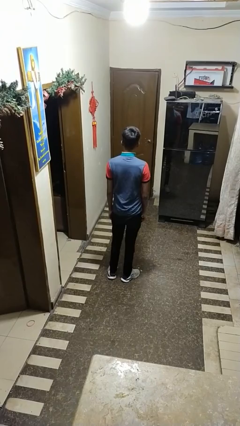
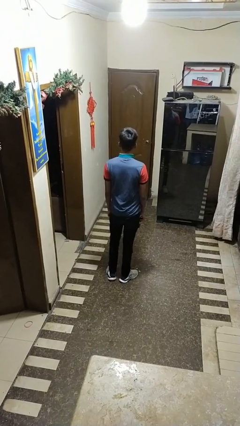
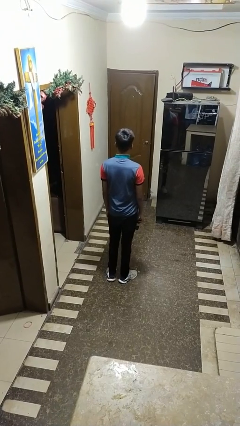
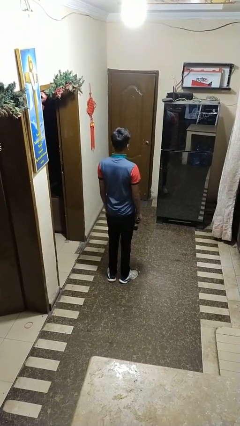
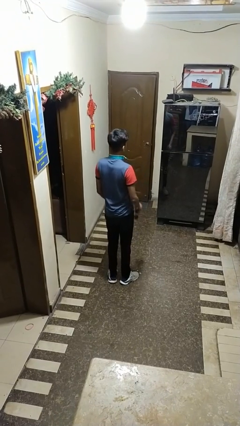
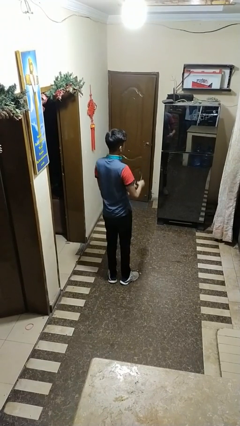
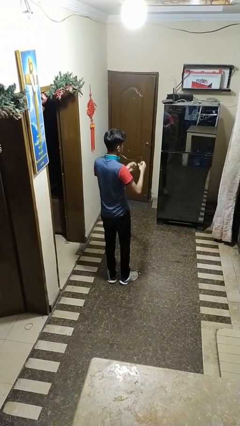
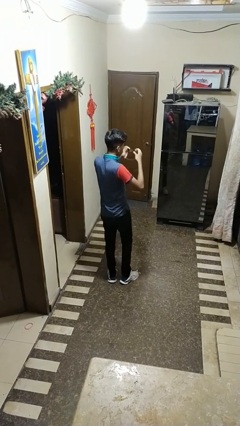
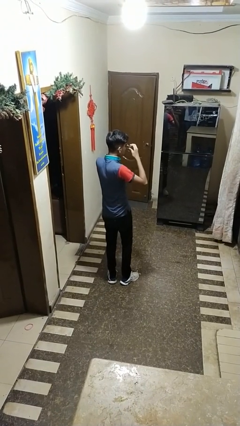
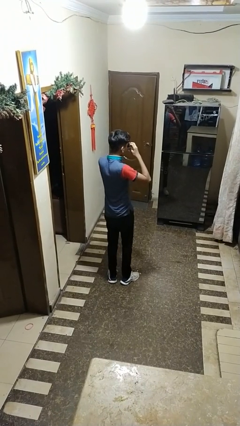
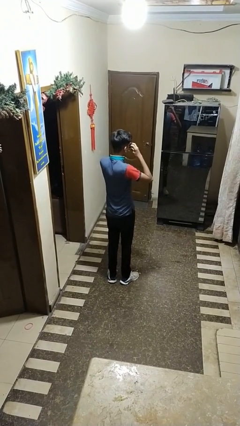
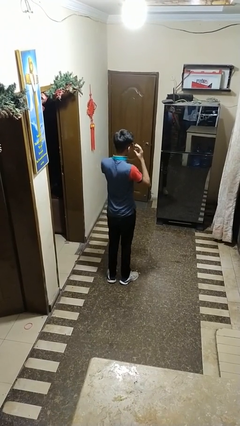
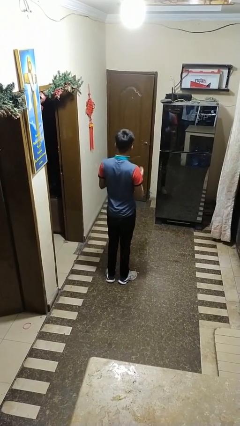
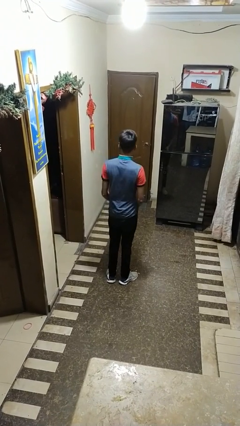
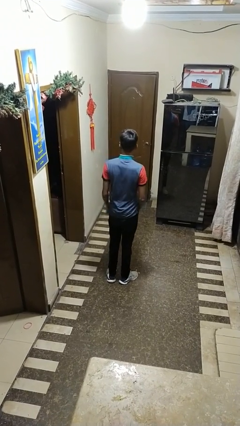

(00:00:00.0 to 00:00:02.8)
person puts on sunglasses

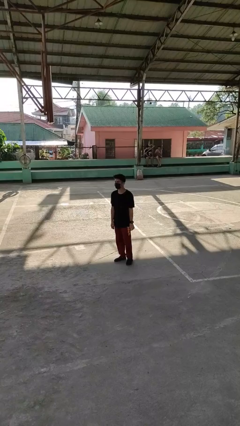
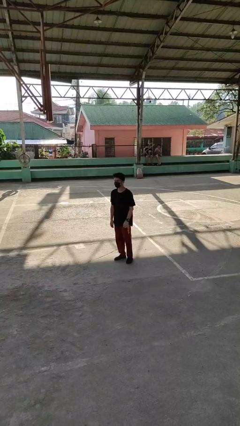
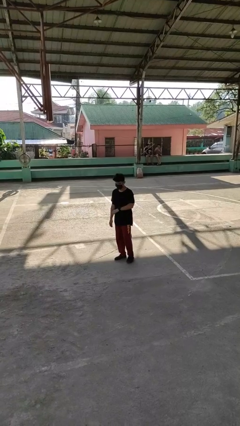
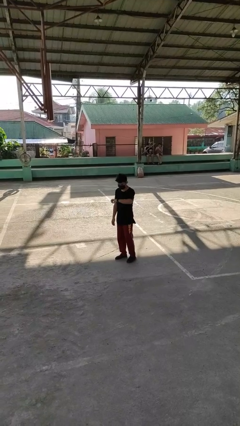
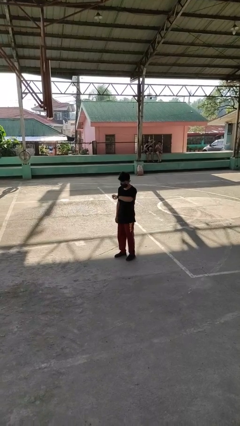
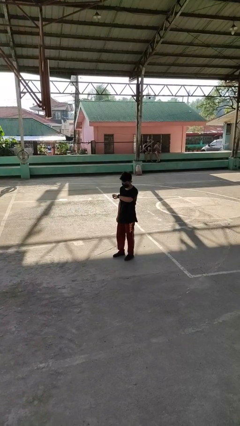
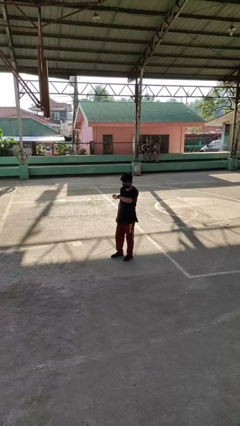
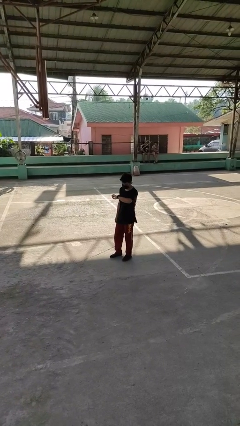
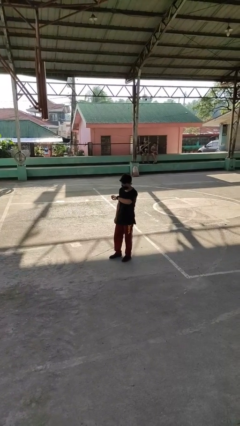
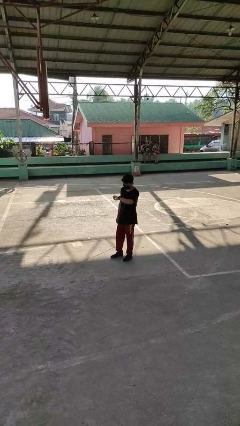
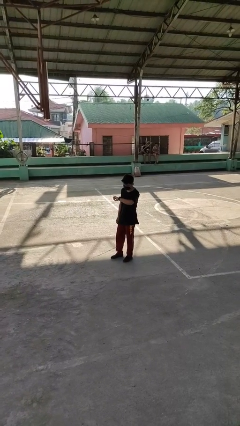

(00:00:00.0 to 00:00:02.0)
person looks at wristwatch

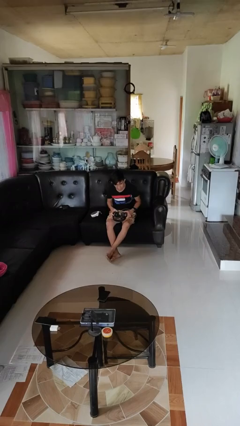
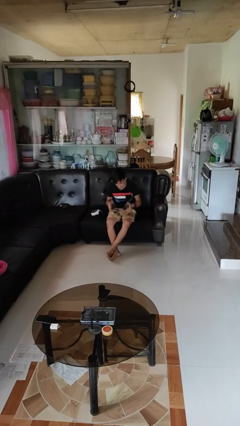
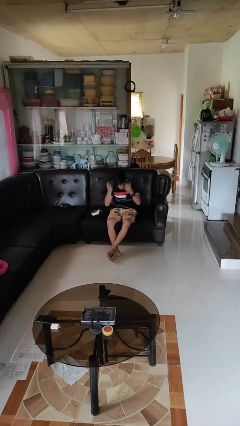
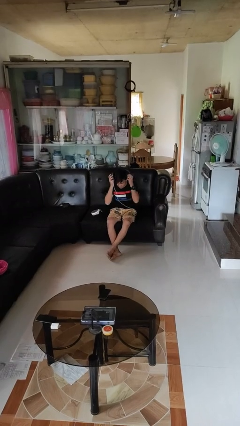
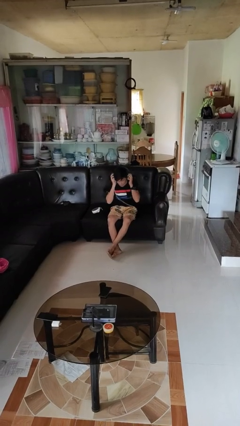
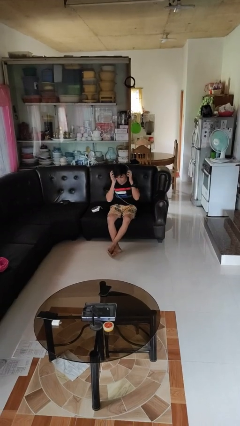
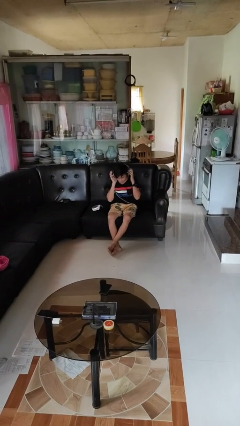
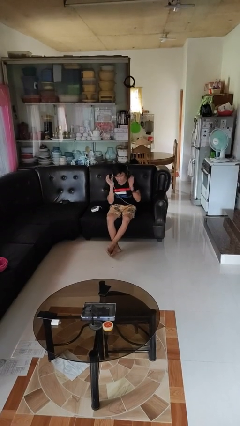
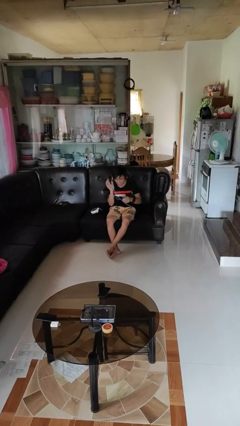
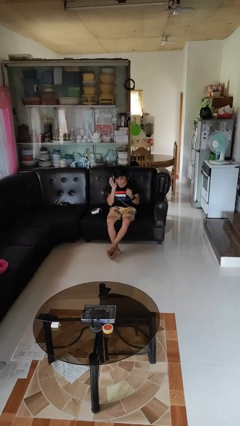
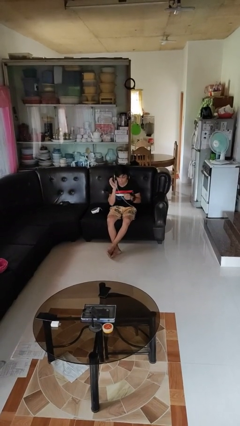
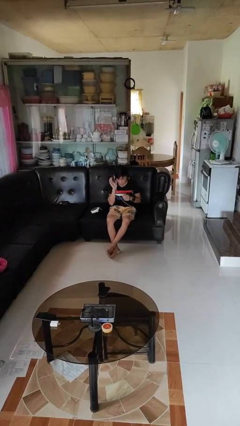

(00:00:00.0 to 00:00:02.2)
person puts on headphones

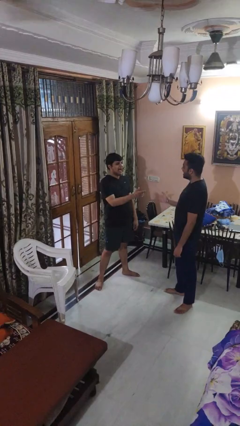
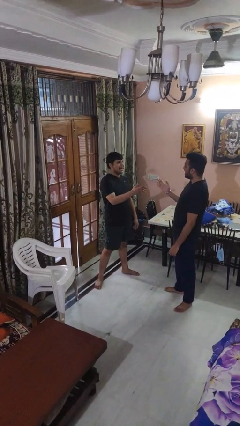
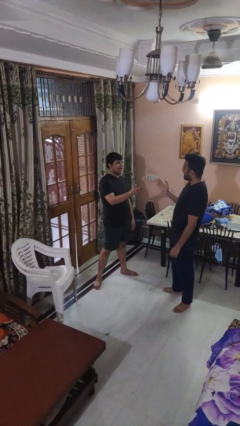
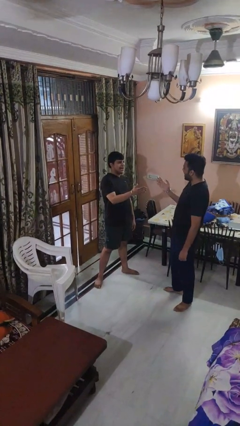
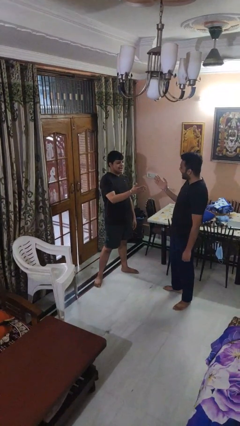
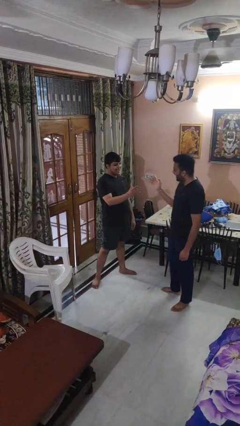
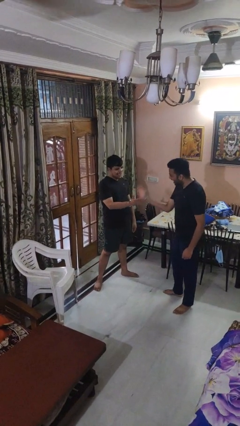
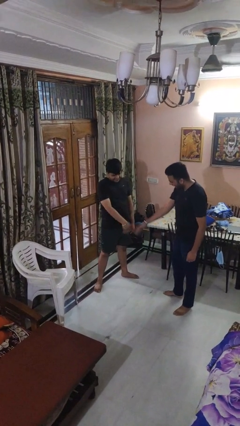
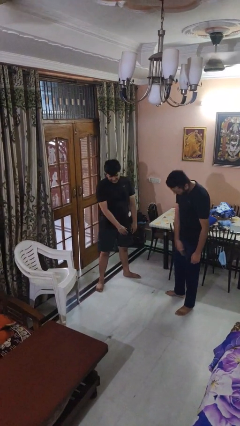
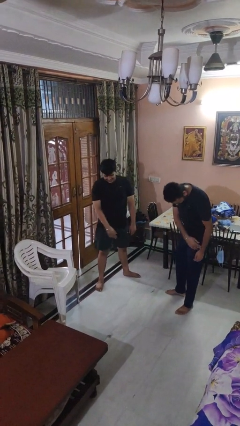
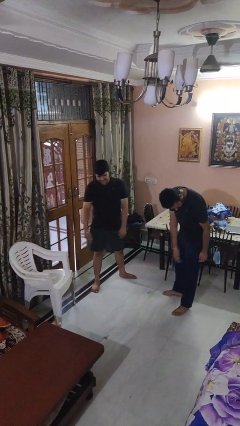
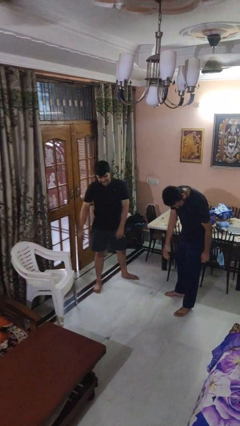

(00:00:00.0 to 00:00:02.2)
person laughs with person

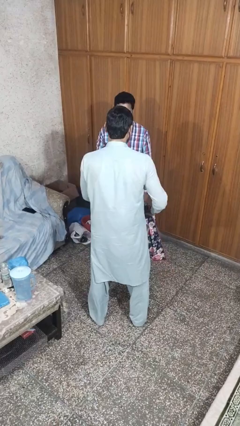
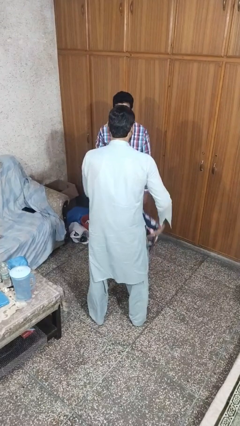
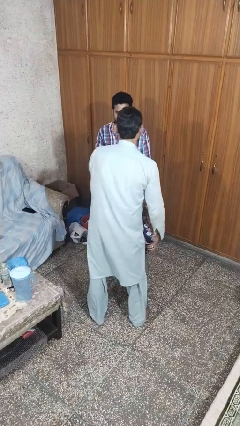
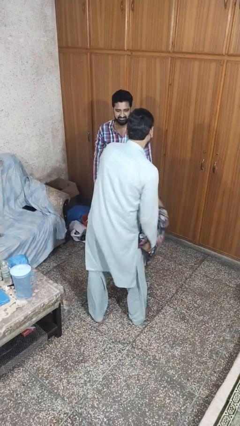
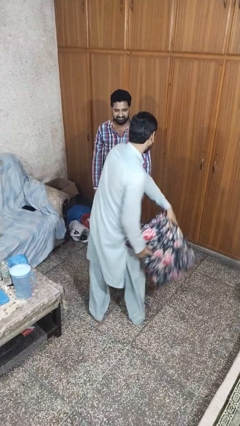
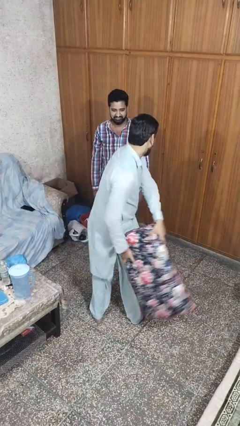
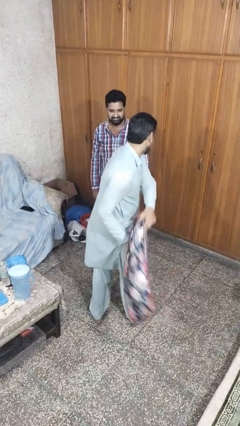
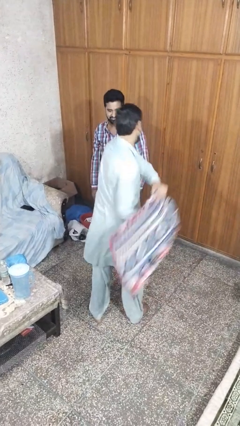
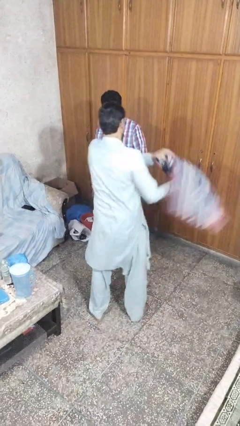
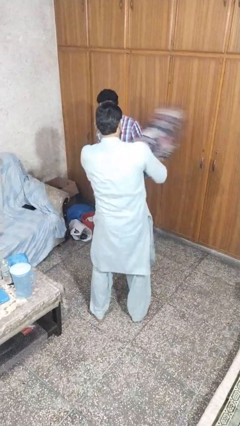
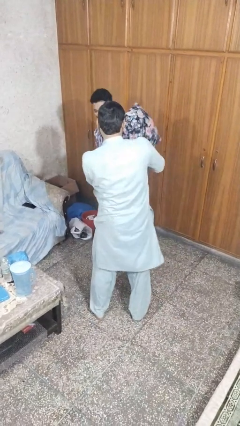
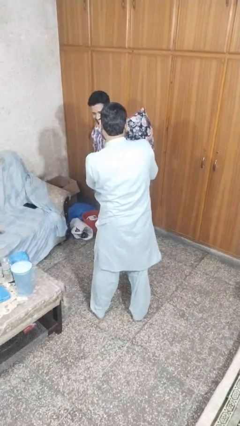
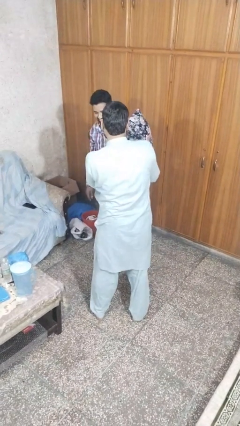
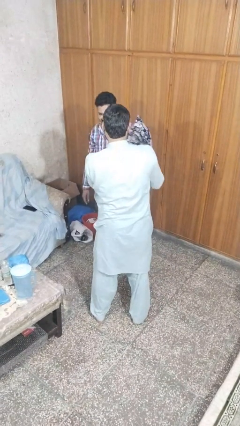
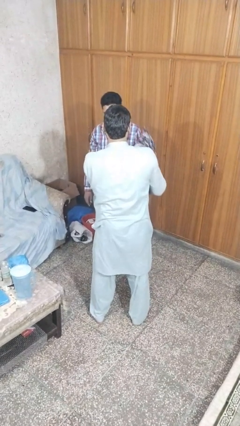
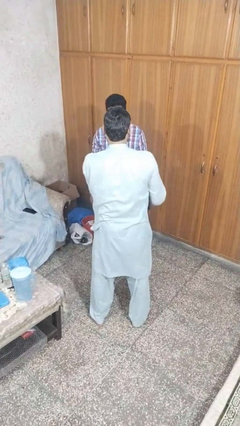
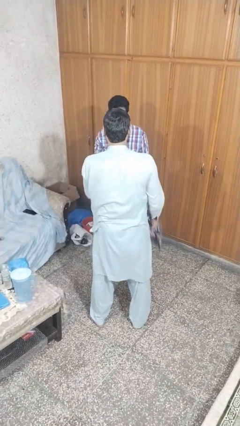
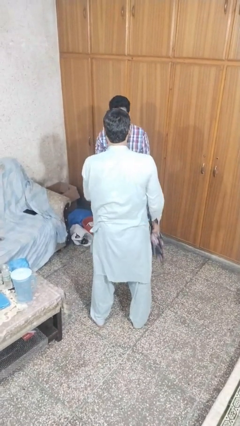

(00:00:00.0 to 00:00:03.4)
person hits person with pillow

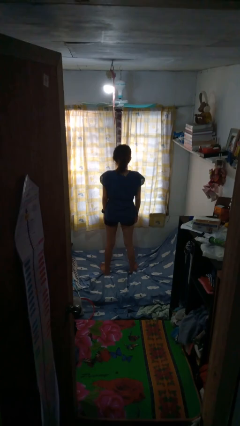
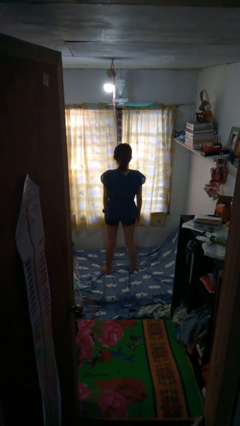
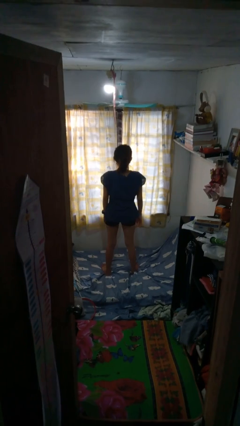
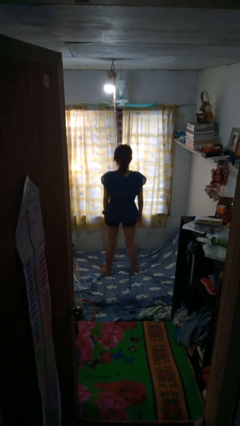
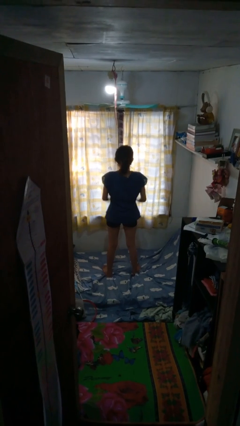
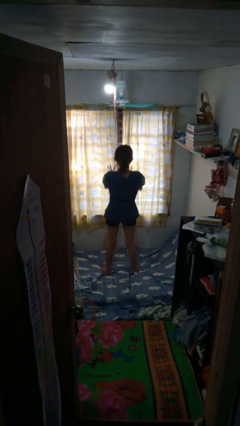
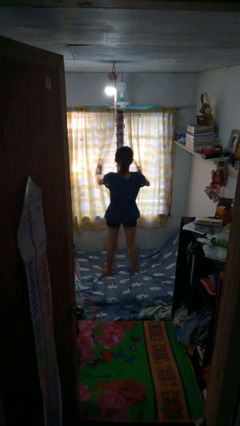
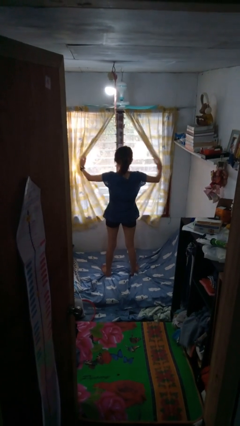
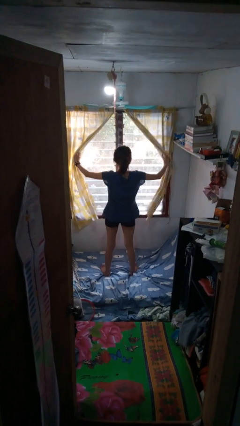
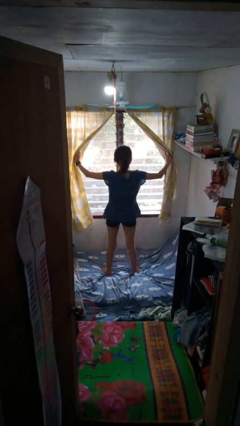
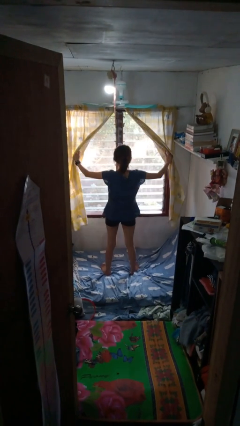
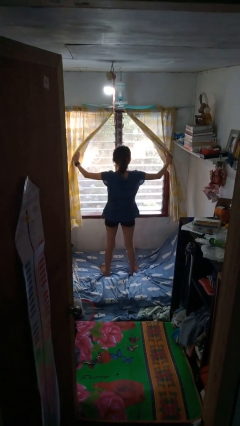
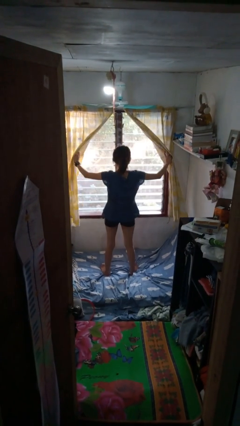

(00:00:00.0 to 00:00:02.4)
person opens curtains

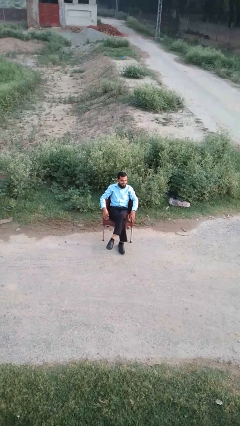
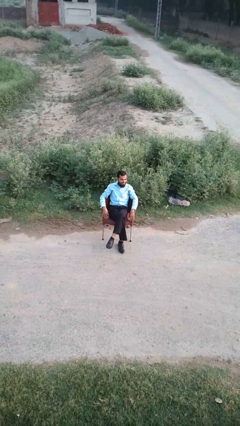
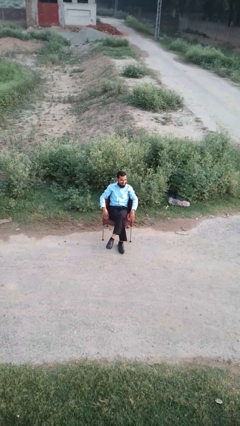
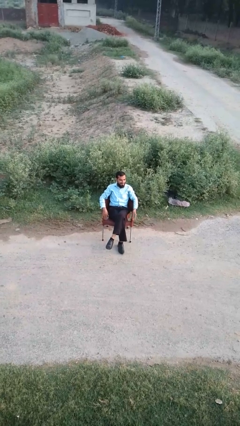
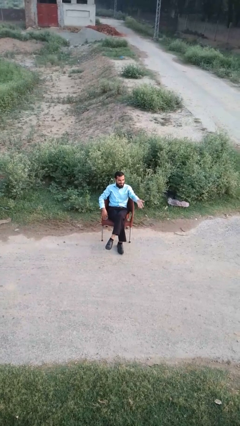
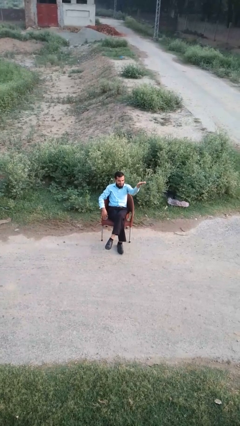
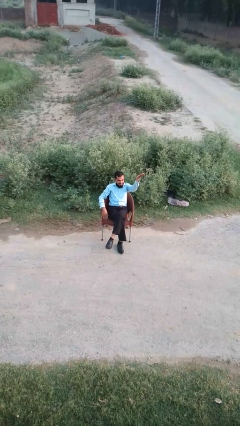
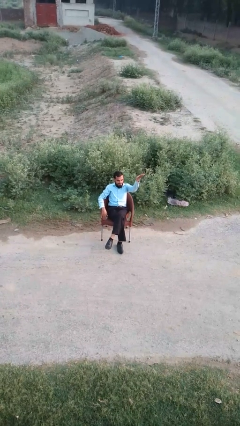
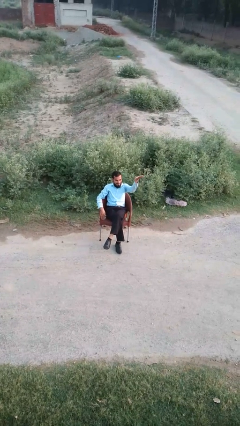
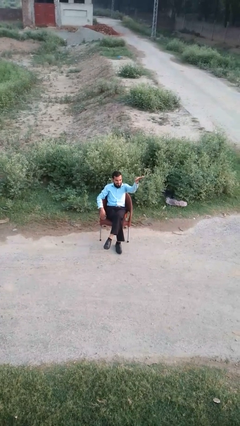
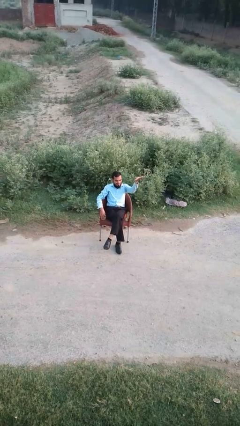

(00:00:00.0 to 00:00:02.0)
person gestures swipe up
